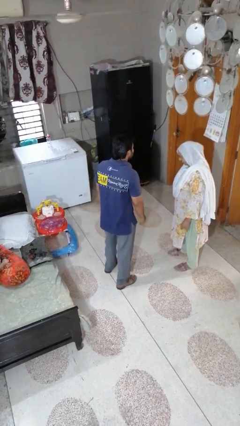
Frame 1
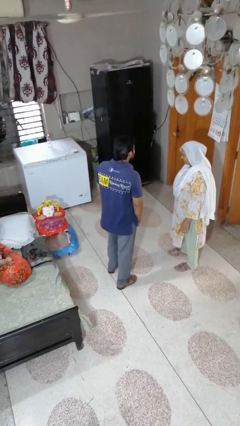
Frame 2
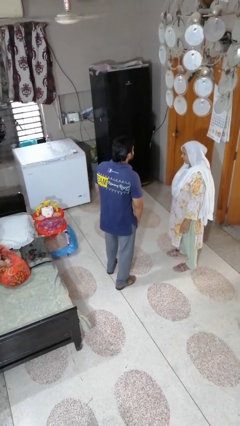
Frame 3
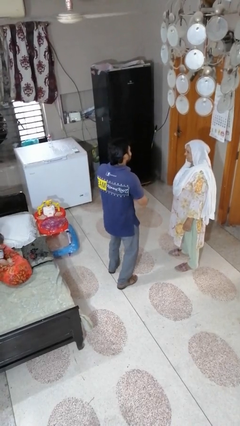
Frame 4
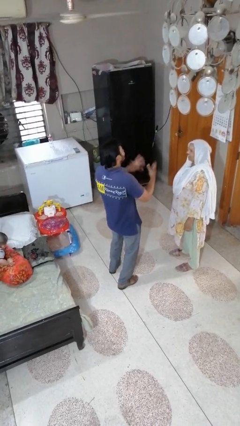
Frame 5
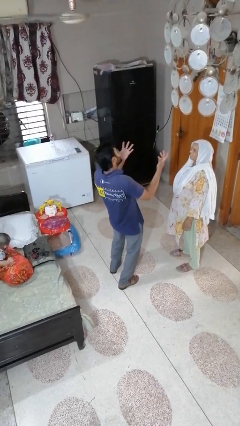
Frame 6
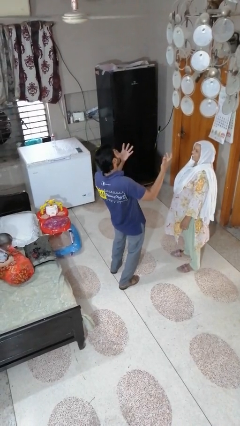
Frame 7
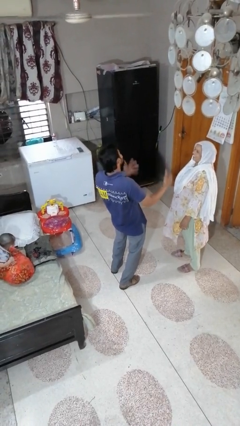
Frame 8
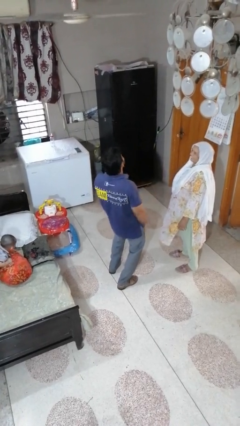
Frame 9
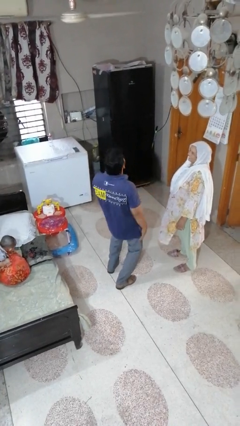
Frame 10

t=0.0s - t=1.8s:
person laughs with person

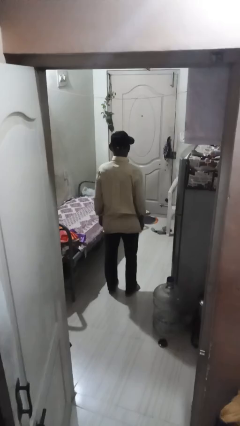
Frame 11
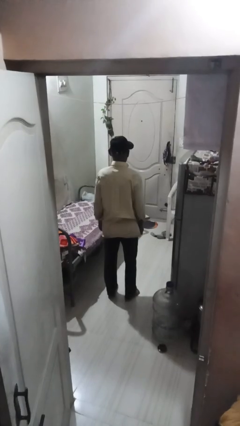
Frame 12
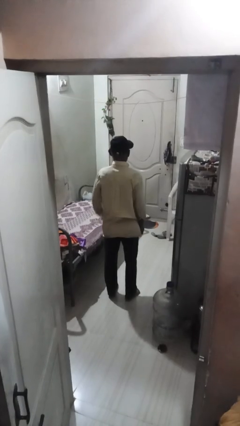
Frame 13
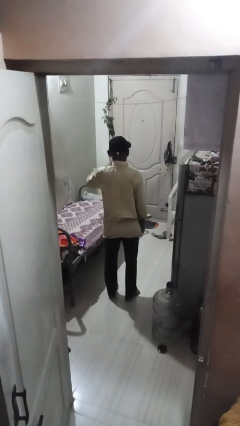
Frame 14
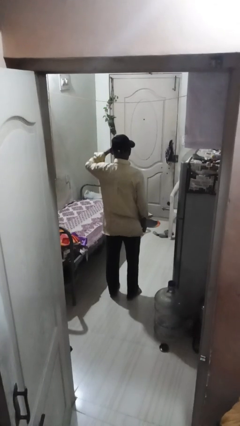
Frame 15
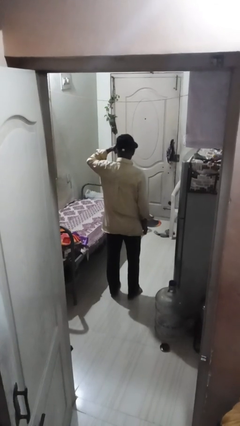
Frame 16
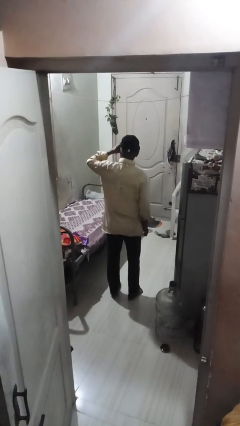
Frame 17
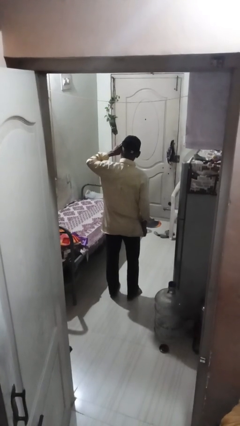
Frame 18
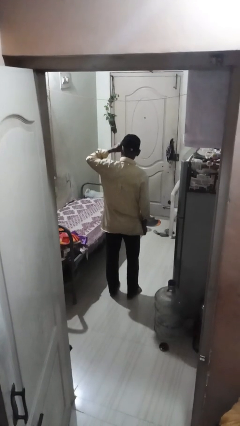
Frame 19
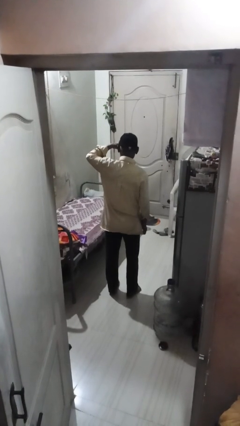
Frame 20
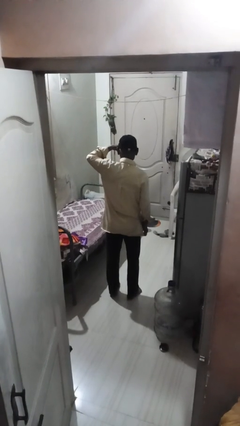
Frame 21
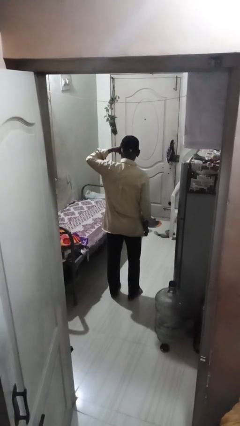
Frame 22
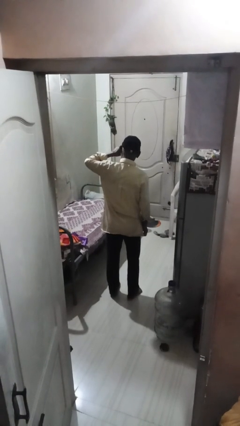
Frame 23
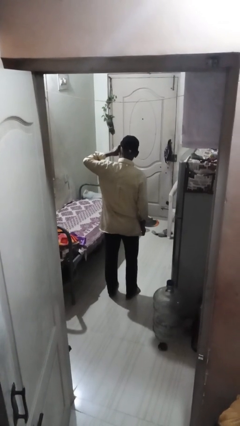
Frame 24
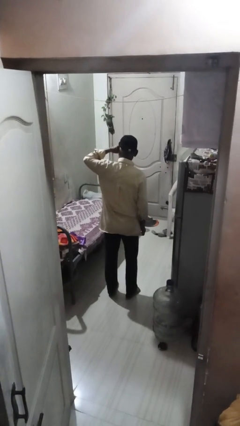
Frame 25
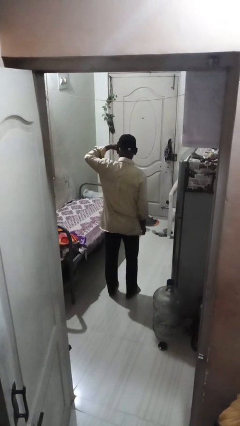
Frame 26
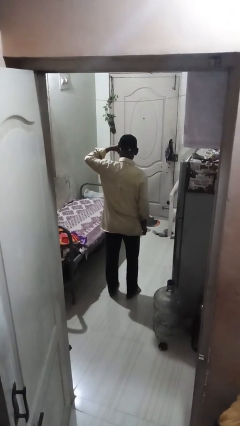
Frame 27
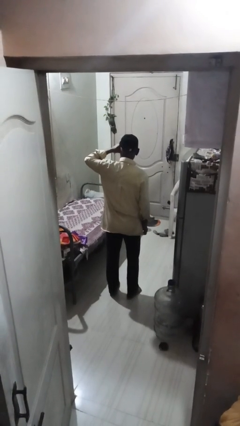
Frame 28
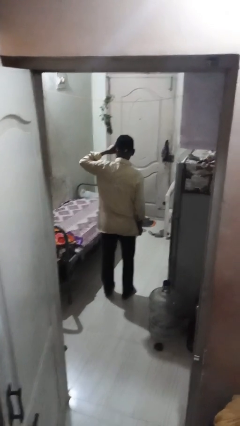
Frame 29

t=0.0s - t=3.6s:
person rubs eyes

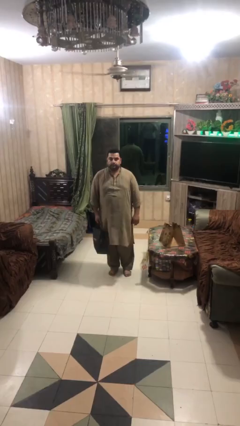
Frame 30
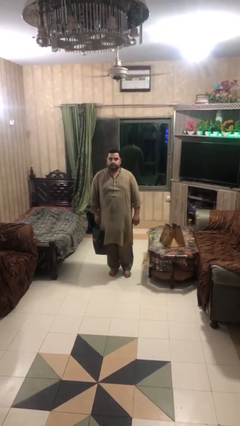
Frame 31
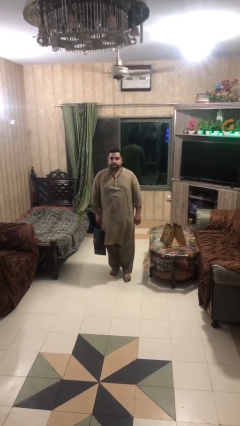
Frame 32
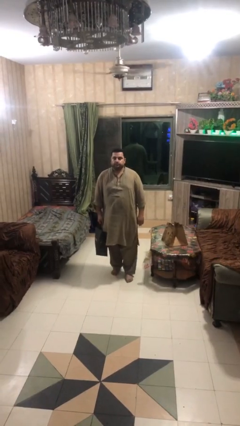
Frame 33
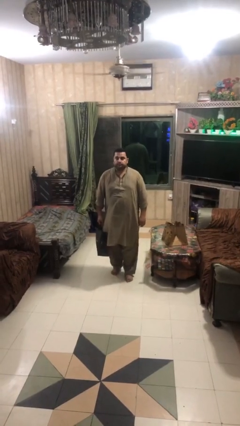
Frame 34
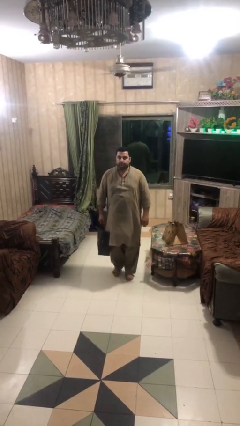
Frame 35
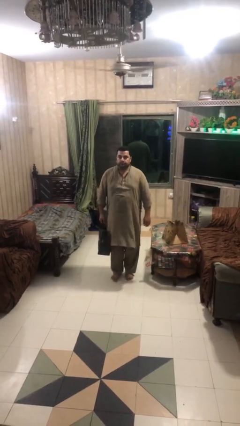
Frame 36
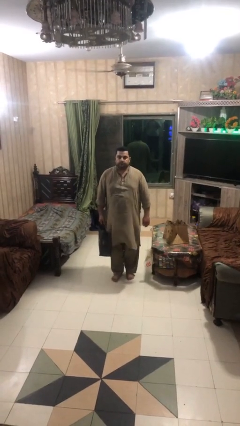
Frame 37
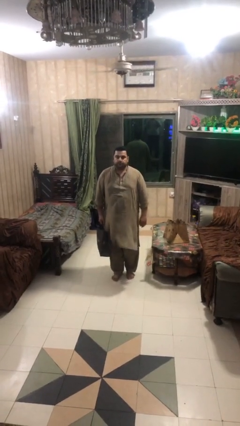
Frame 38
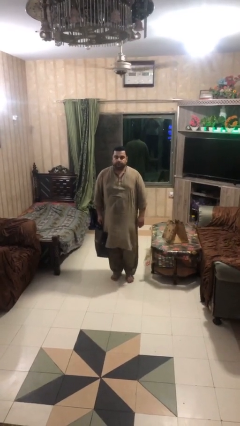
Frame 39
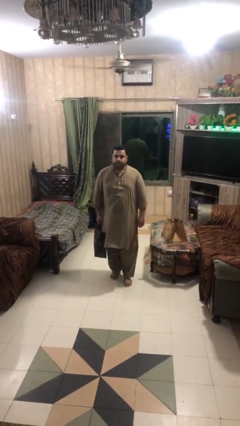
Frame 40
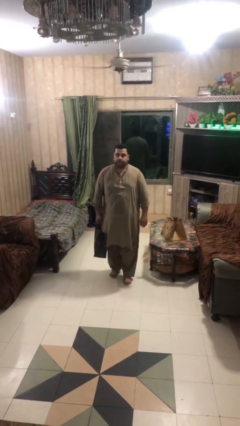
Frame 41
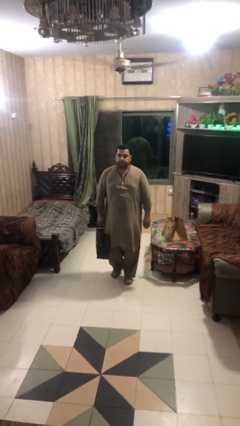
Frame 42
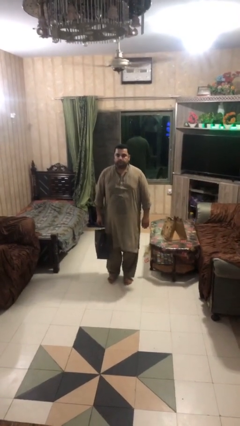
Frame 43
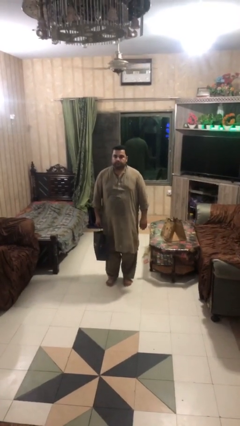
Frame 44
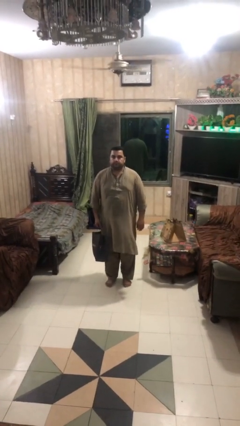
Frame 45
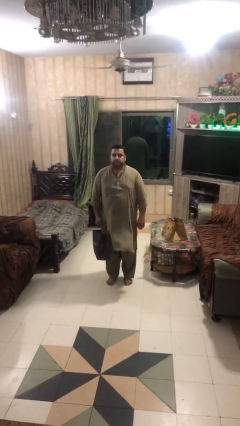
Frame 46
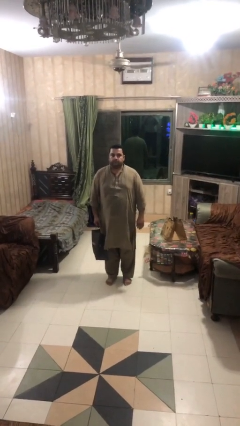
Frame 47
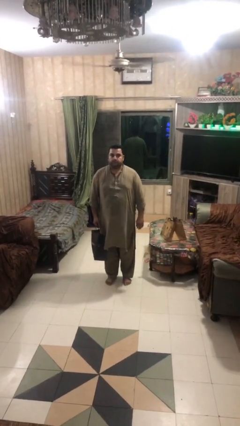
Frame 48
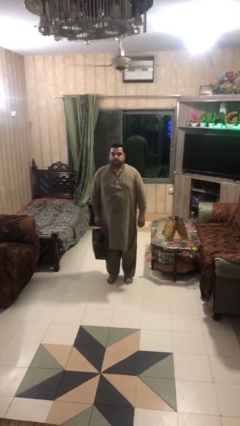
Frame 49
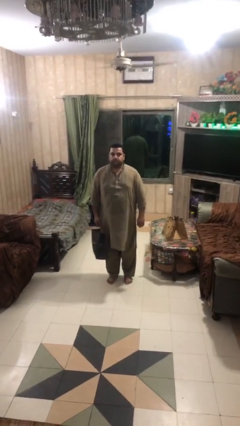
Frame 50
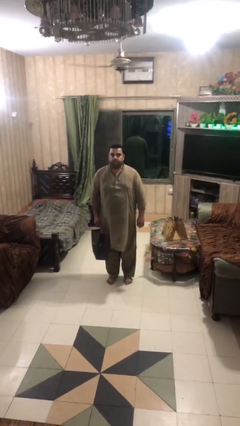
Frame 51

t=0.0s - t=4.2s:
person carries groceries

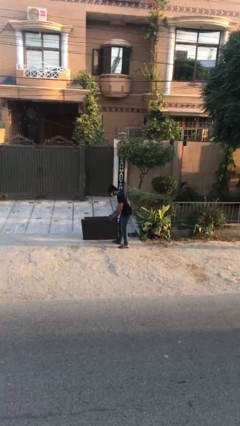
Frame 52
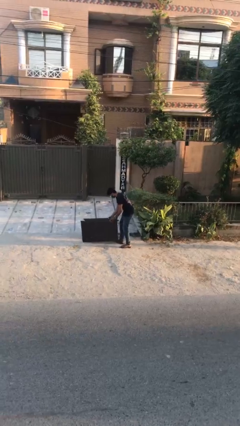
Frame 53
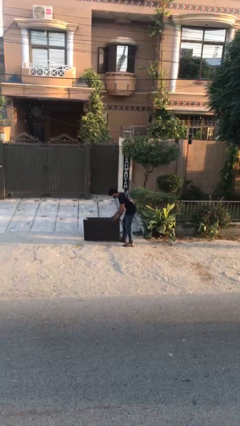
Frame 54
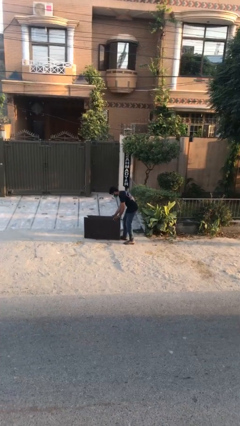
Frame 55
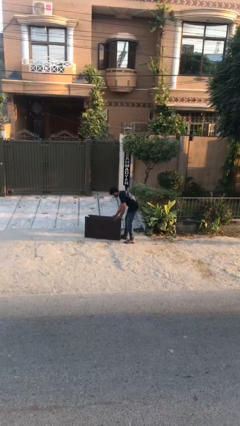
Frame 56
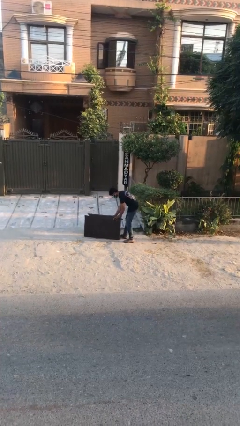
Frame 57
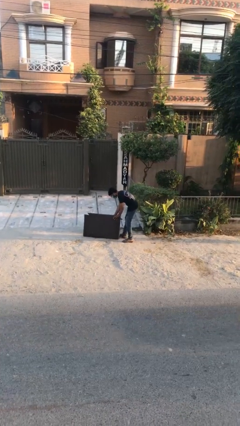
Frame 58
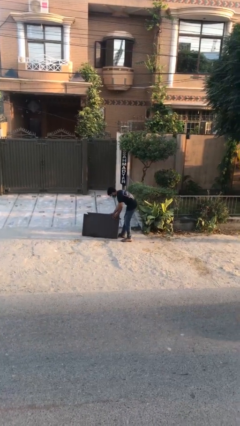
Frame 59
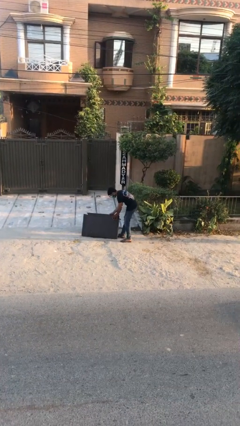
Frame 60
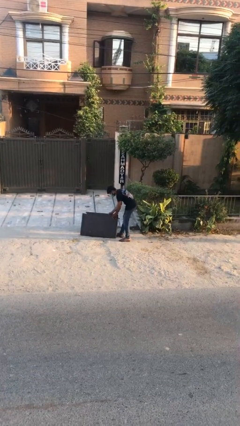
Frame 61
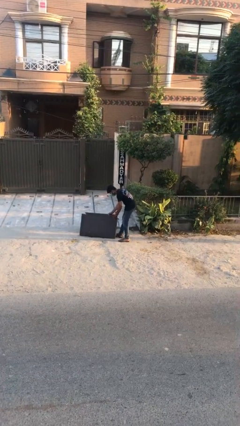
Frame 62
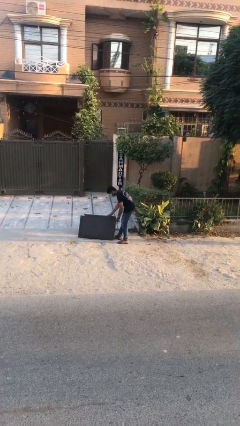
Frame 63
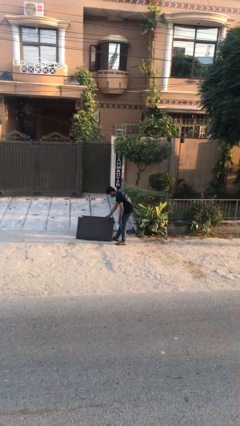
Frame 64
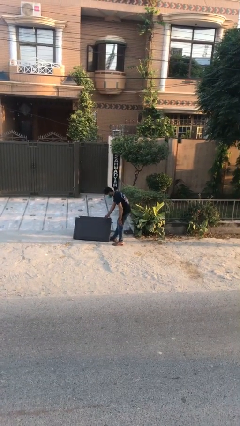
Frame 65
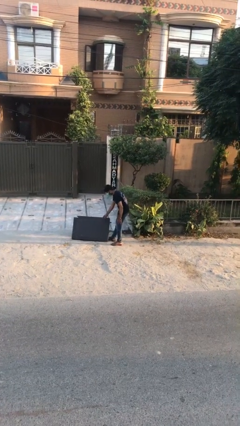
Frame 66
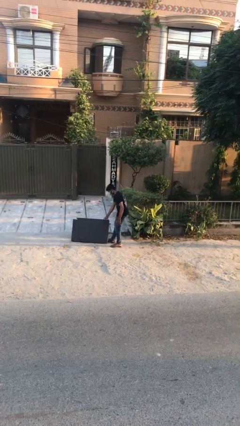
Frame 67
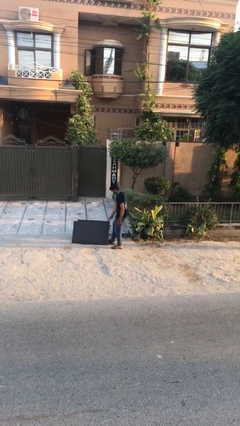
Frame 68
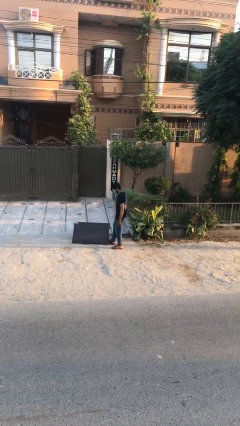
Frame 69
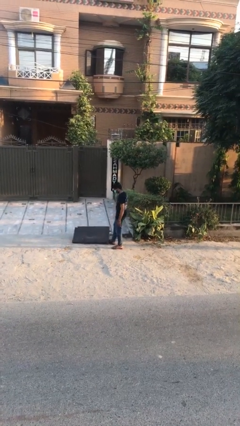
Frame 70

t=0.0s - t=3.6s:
person puts down object on floor

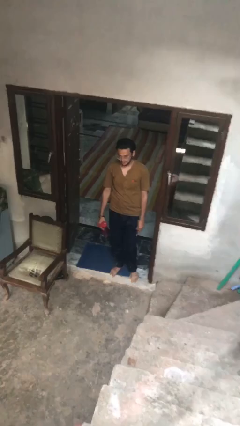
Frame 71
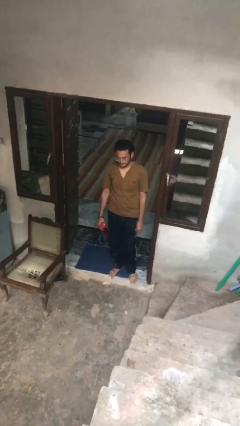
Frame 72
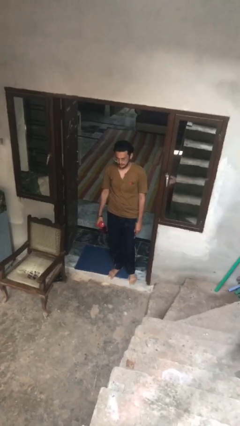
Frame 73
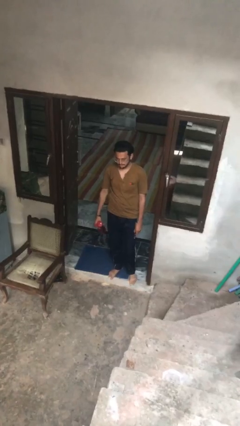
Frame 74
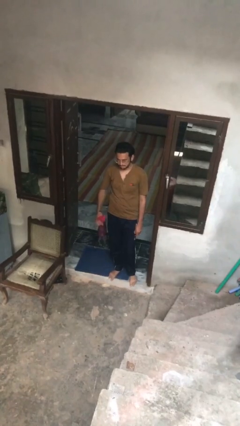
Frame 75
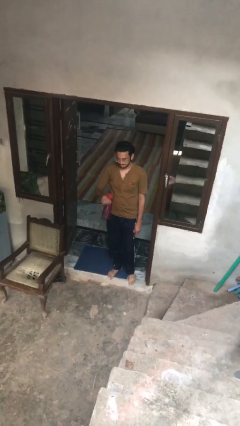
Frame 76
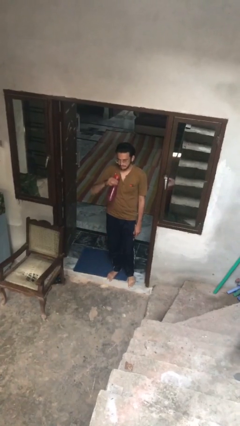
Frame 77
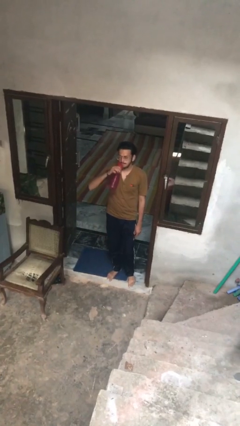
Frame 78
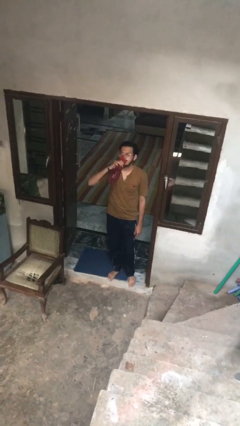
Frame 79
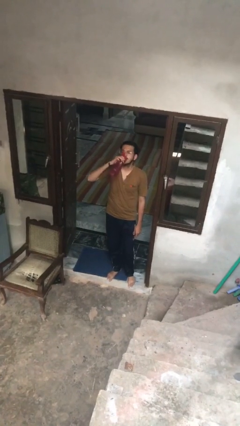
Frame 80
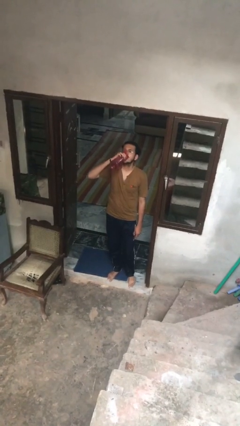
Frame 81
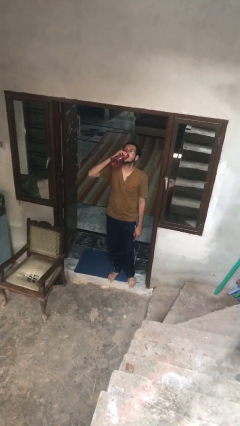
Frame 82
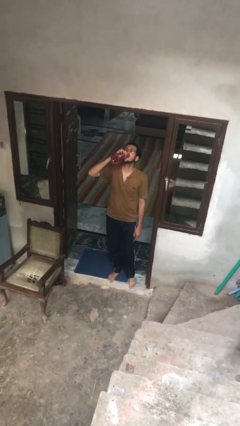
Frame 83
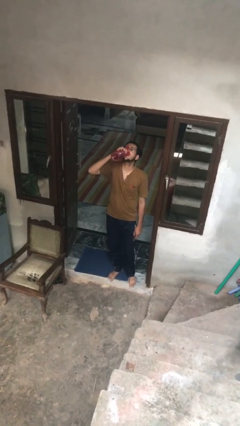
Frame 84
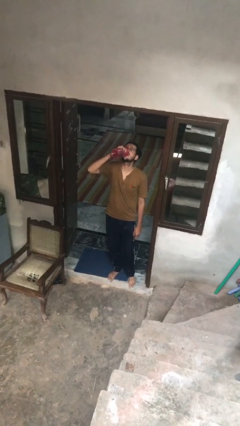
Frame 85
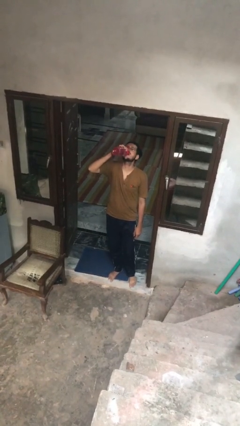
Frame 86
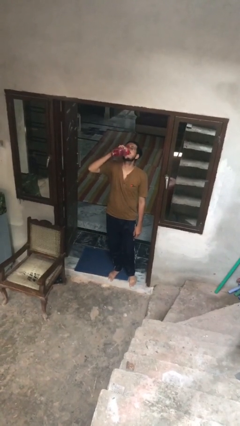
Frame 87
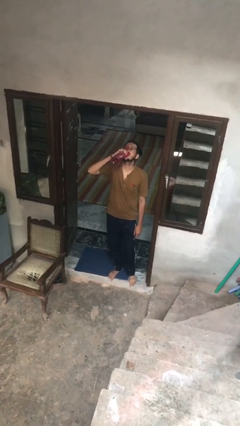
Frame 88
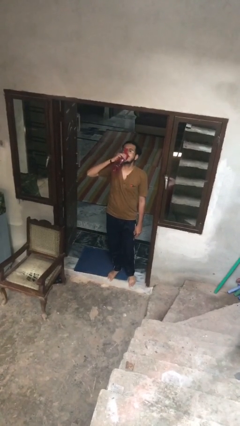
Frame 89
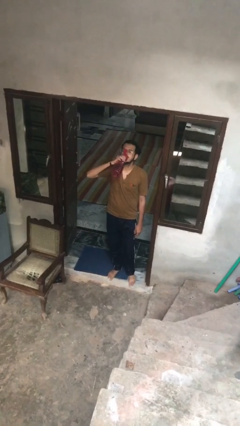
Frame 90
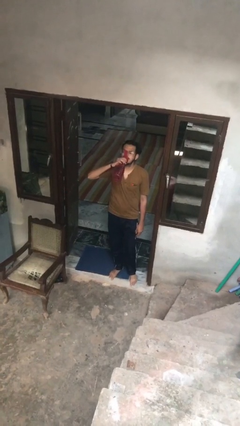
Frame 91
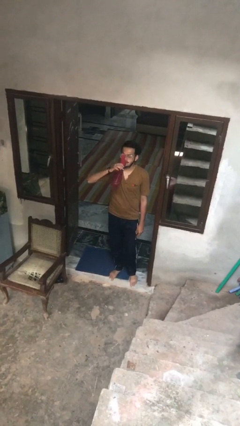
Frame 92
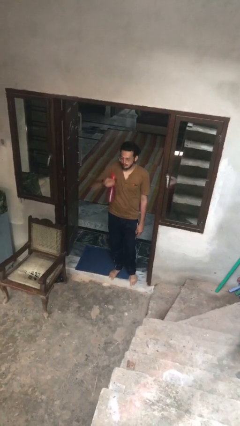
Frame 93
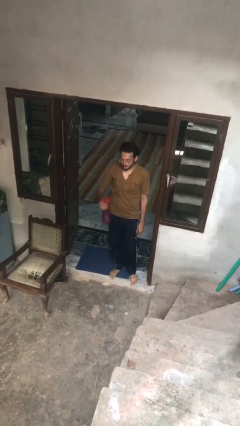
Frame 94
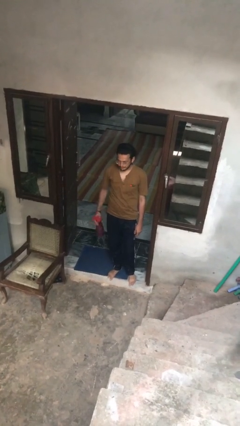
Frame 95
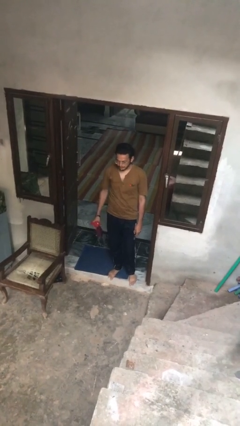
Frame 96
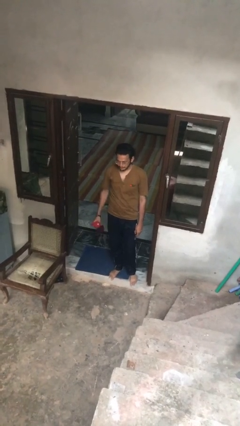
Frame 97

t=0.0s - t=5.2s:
person drinks from bottle
